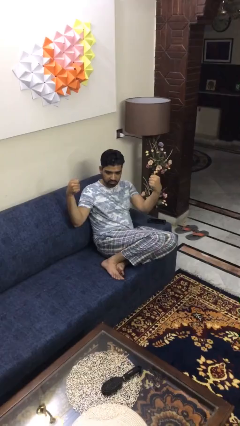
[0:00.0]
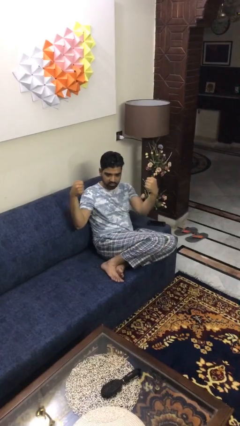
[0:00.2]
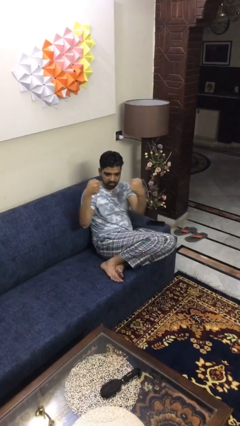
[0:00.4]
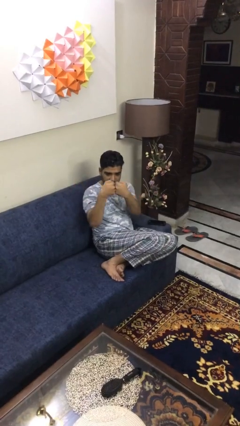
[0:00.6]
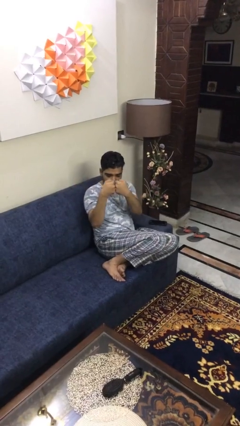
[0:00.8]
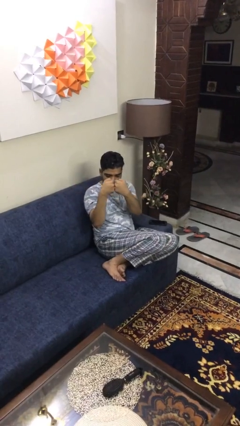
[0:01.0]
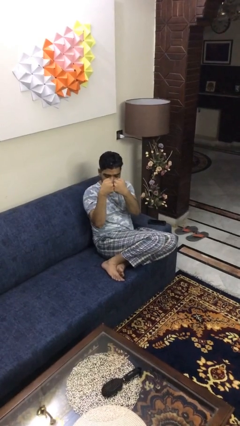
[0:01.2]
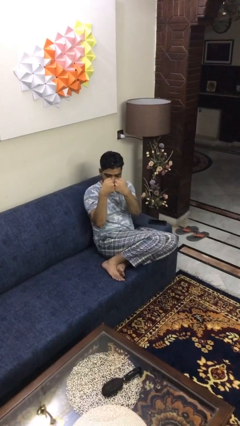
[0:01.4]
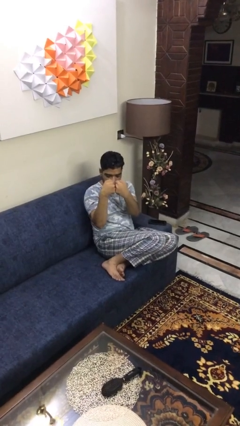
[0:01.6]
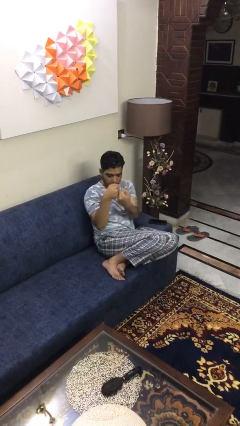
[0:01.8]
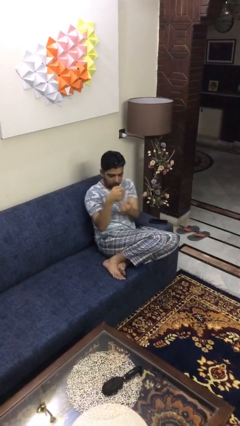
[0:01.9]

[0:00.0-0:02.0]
person gestures zoom out

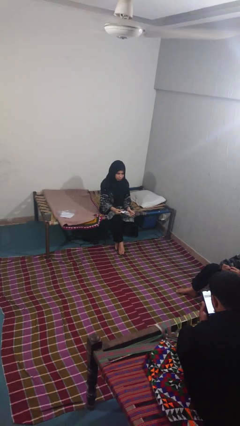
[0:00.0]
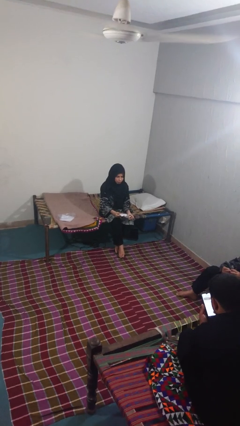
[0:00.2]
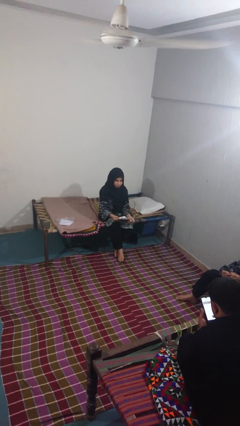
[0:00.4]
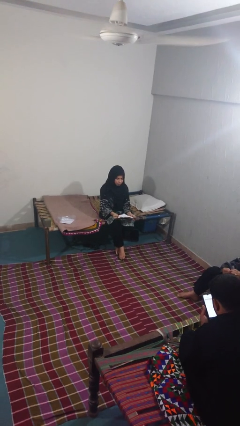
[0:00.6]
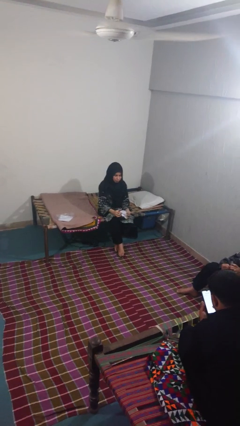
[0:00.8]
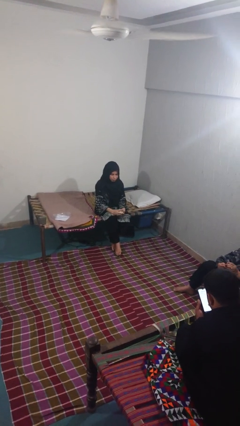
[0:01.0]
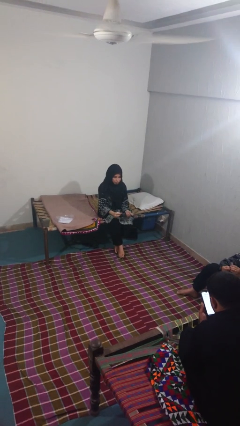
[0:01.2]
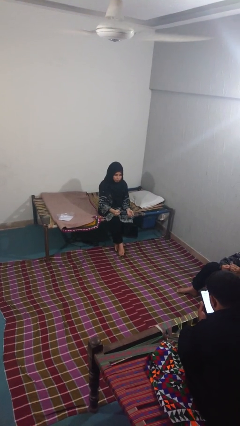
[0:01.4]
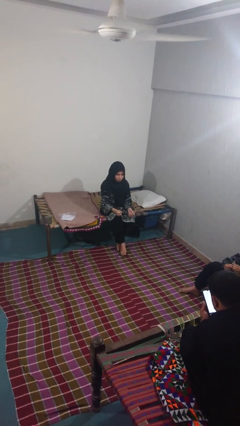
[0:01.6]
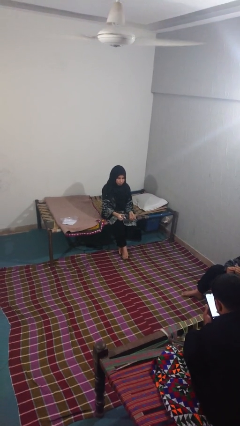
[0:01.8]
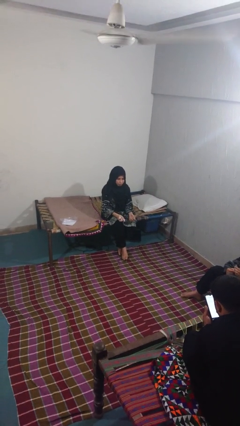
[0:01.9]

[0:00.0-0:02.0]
person crumples paper

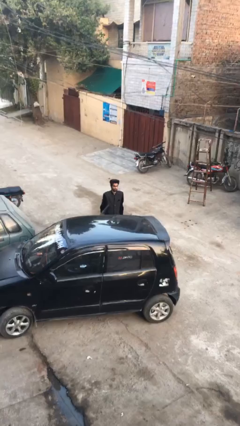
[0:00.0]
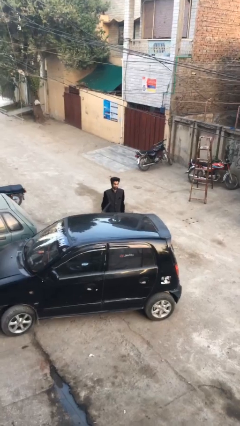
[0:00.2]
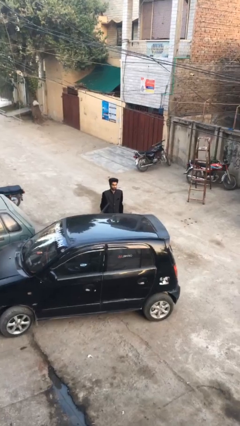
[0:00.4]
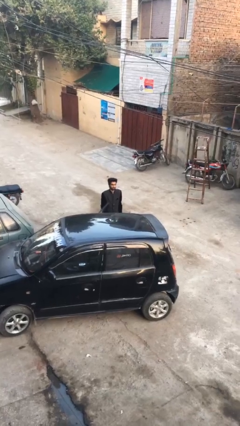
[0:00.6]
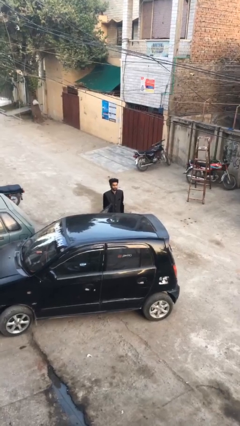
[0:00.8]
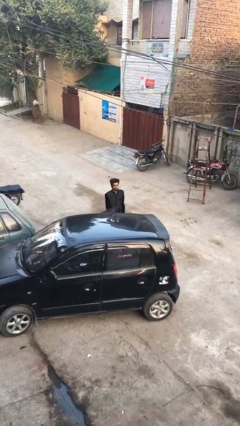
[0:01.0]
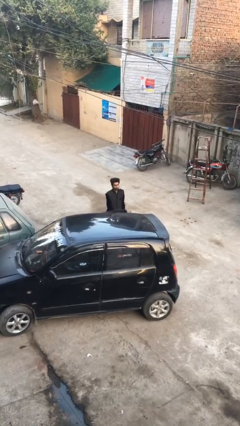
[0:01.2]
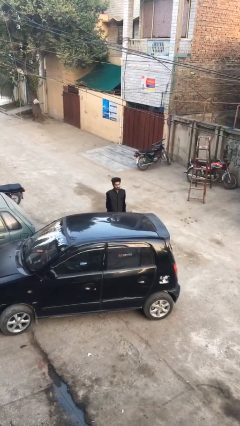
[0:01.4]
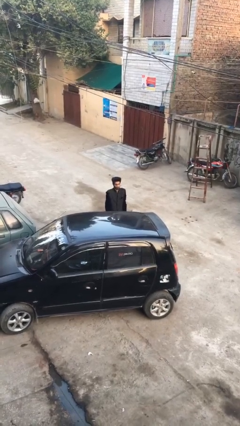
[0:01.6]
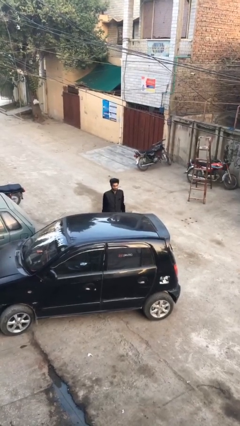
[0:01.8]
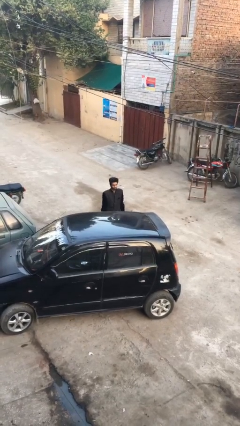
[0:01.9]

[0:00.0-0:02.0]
person closes car door

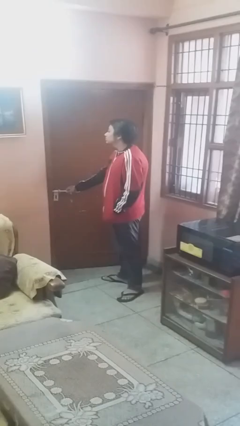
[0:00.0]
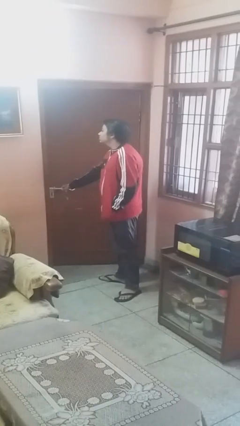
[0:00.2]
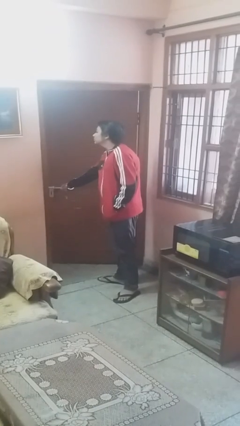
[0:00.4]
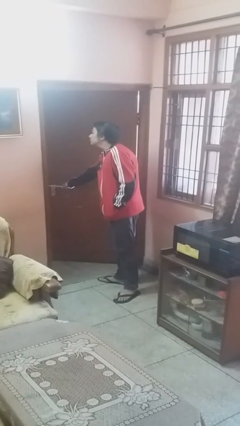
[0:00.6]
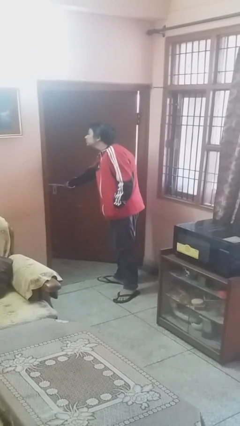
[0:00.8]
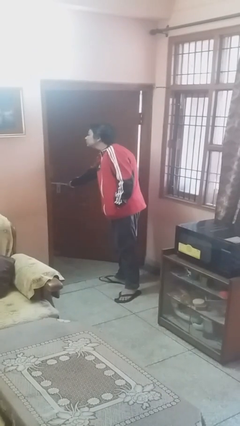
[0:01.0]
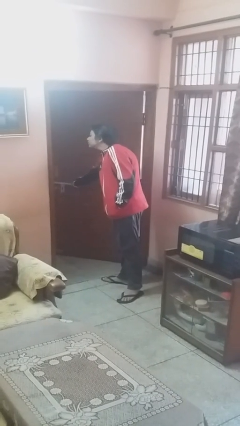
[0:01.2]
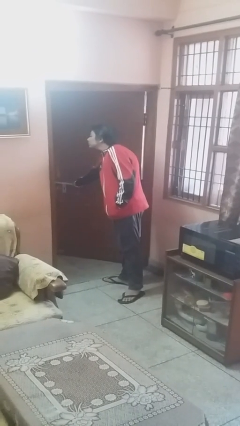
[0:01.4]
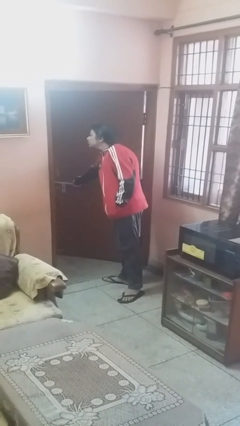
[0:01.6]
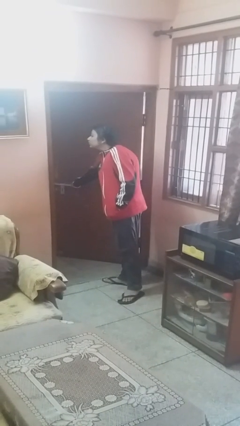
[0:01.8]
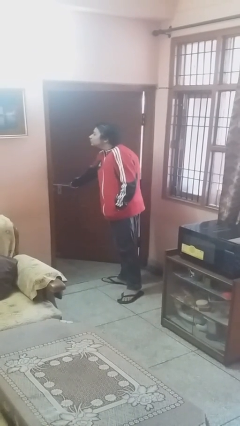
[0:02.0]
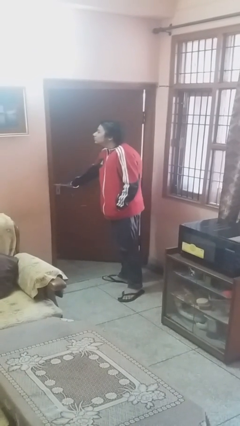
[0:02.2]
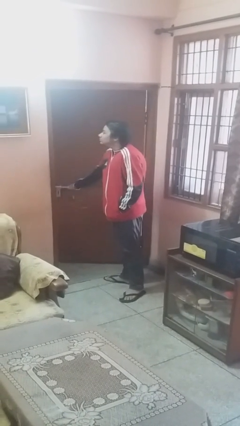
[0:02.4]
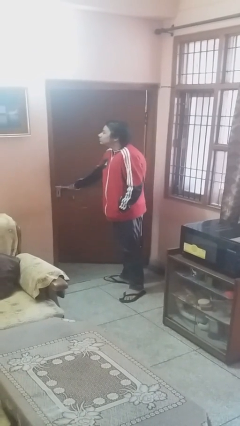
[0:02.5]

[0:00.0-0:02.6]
person opens facility door

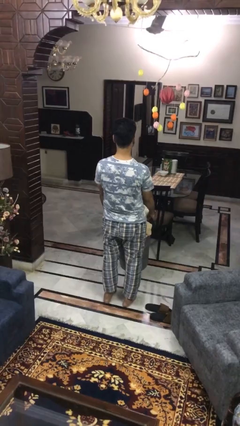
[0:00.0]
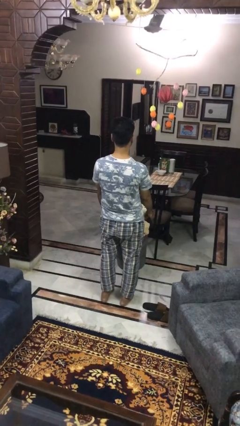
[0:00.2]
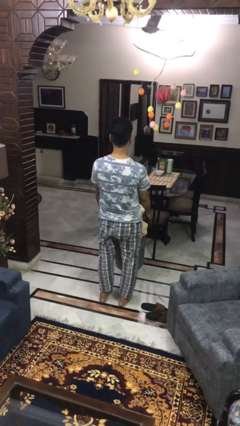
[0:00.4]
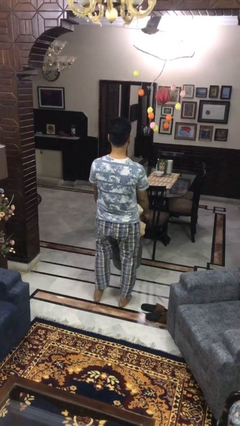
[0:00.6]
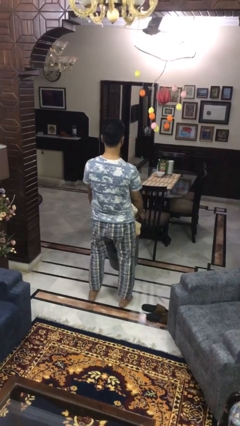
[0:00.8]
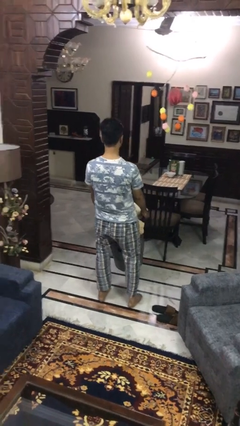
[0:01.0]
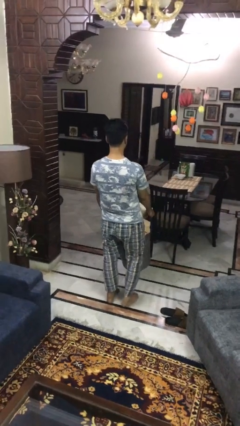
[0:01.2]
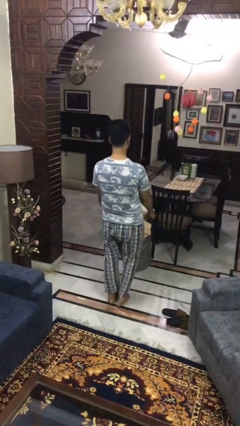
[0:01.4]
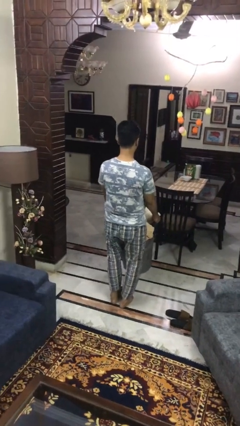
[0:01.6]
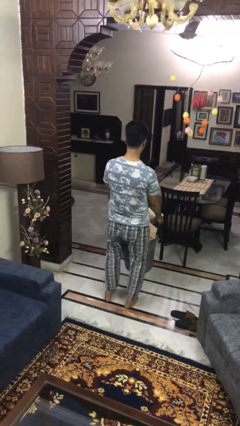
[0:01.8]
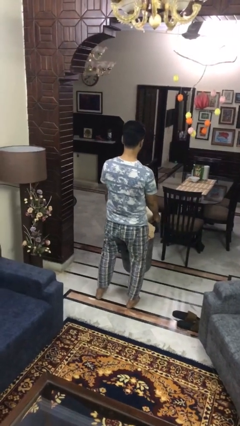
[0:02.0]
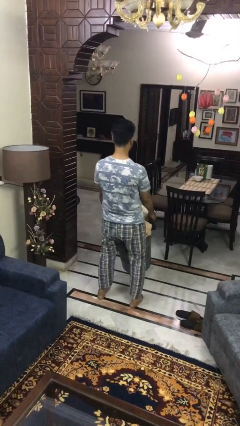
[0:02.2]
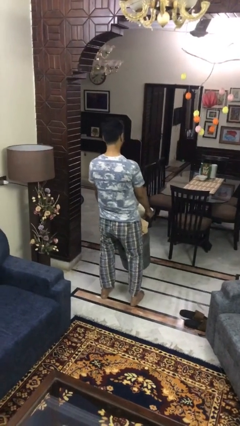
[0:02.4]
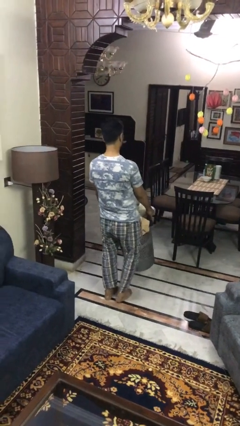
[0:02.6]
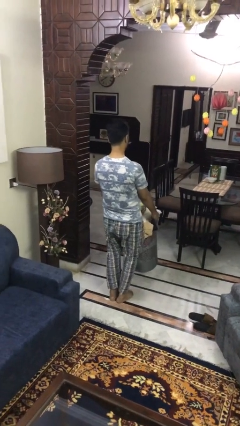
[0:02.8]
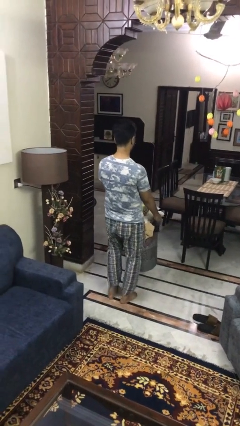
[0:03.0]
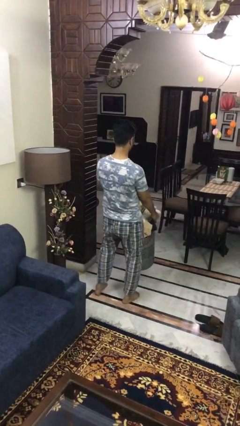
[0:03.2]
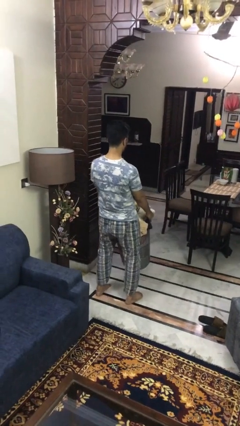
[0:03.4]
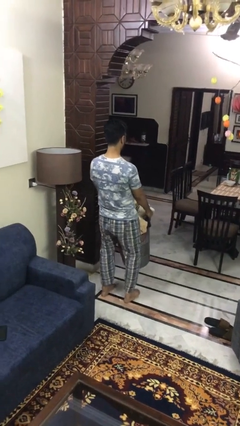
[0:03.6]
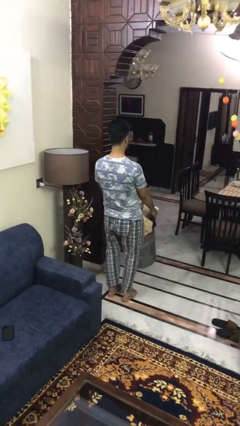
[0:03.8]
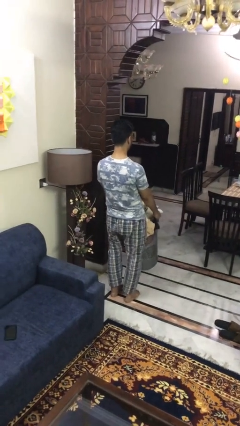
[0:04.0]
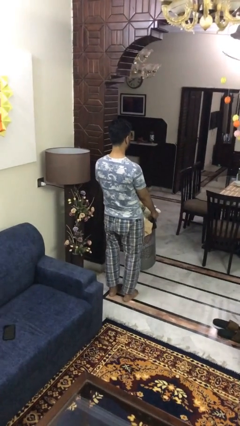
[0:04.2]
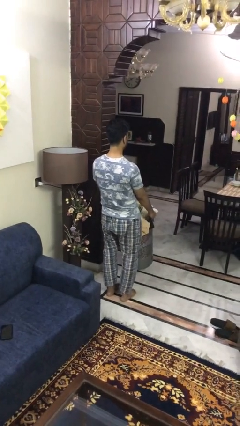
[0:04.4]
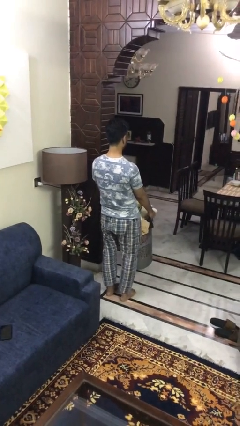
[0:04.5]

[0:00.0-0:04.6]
person carries laundry basket

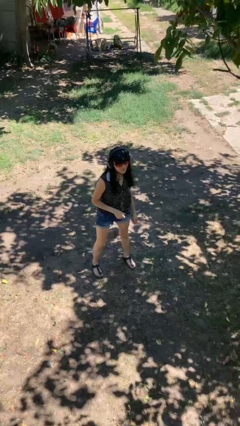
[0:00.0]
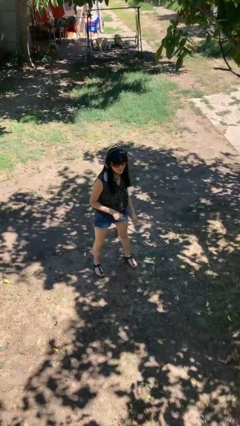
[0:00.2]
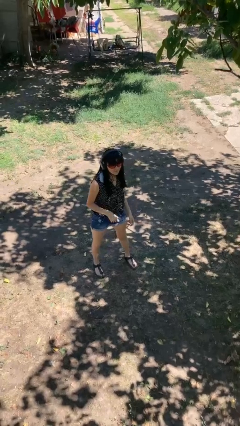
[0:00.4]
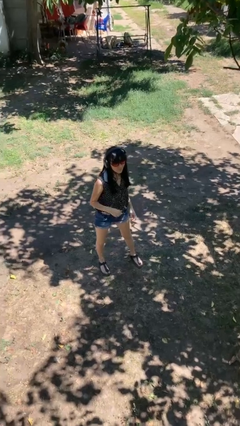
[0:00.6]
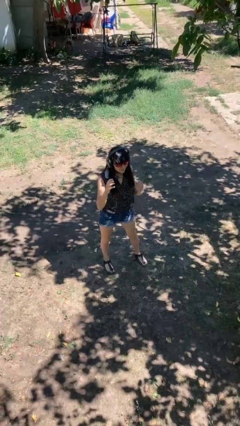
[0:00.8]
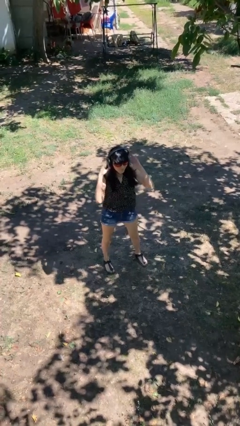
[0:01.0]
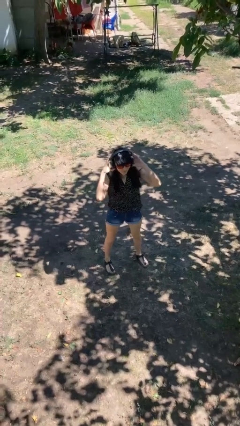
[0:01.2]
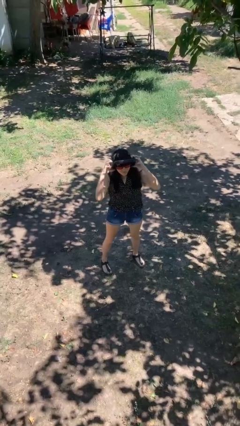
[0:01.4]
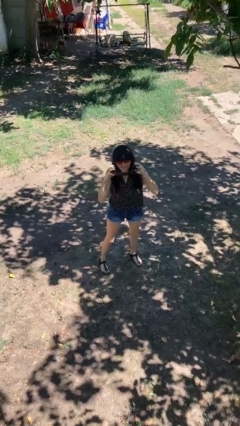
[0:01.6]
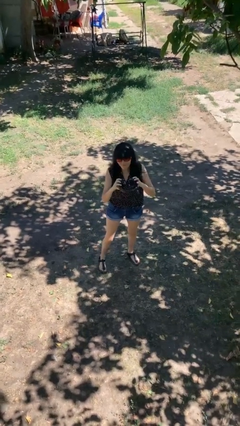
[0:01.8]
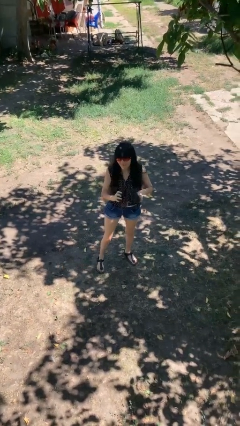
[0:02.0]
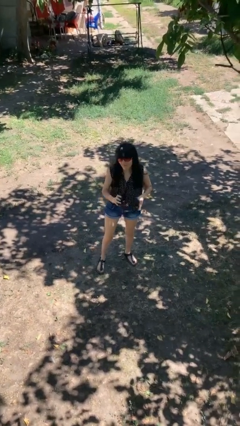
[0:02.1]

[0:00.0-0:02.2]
person takes off headphones

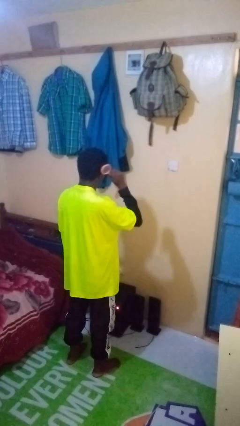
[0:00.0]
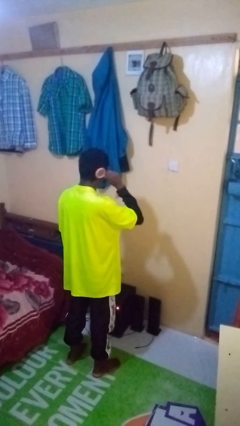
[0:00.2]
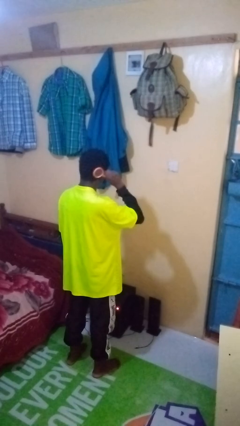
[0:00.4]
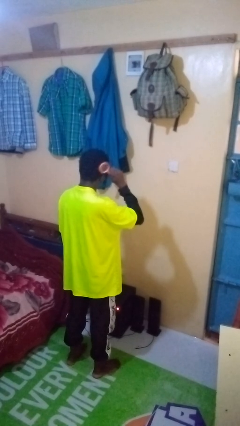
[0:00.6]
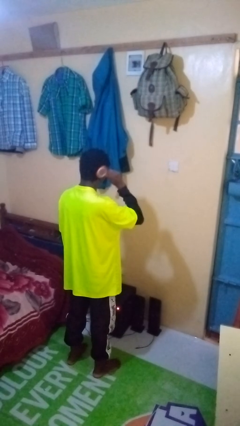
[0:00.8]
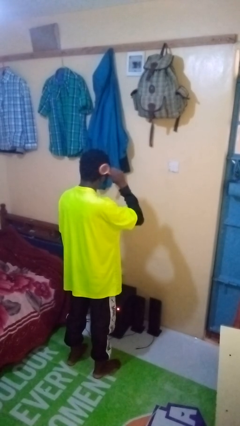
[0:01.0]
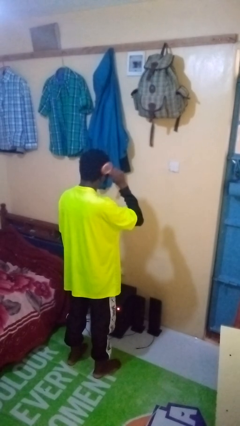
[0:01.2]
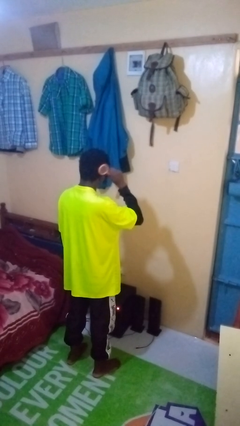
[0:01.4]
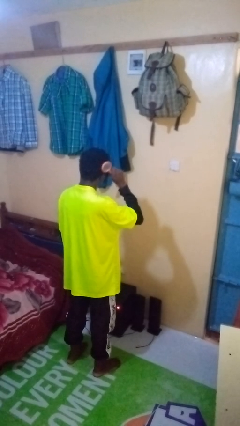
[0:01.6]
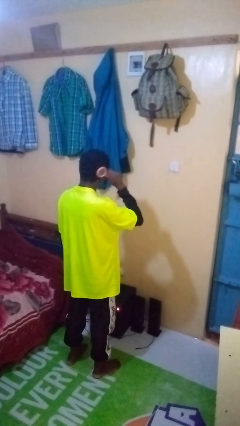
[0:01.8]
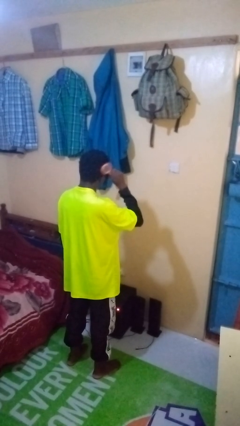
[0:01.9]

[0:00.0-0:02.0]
person brushes hair
